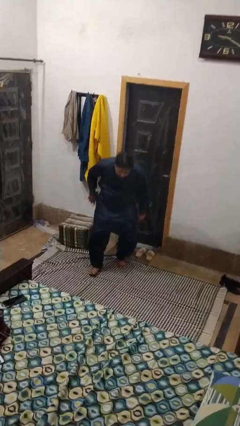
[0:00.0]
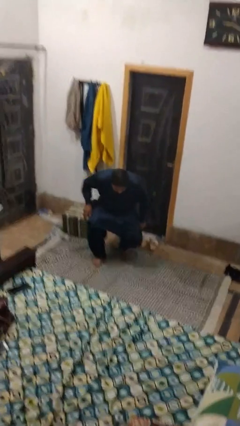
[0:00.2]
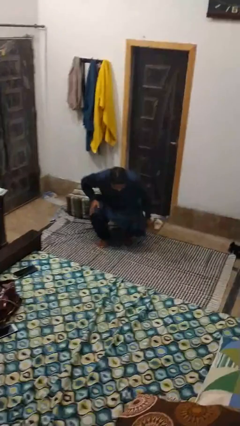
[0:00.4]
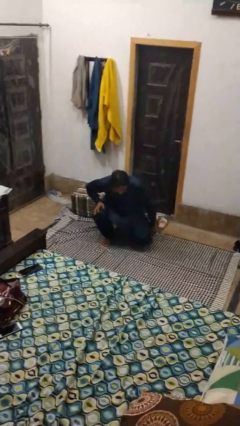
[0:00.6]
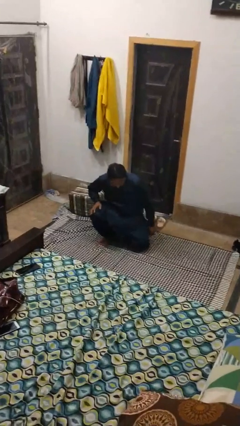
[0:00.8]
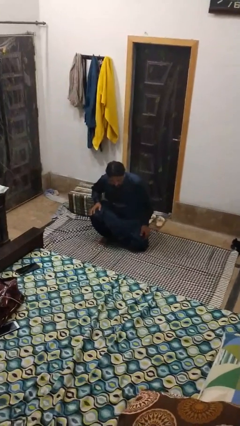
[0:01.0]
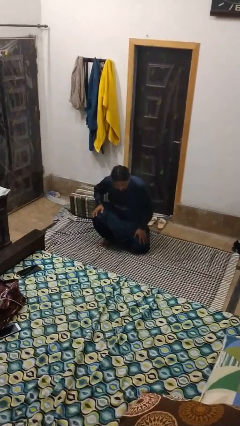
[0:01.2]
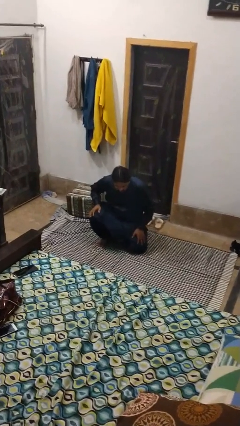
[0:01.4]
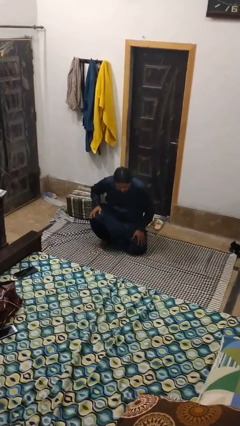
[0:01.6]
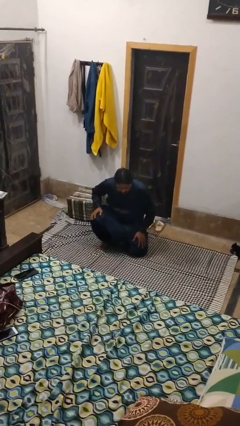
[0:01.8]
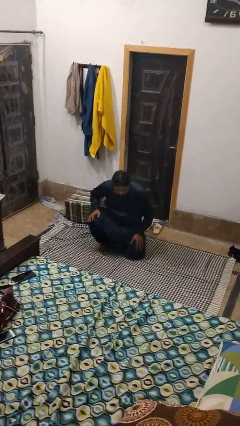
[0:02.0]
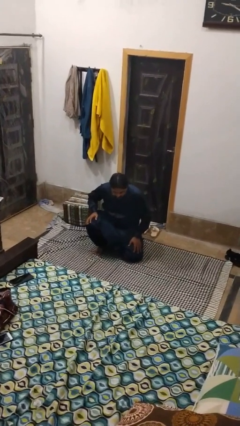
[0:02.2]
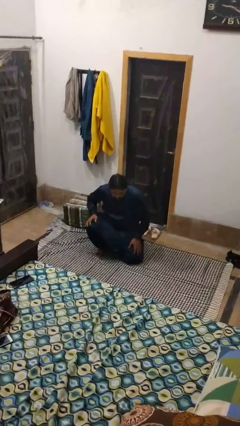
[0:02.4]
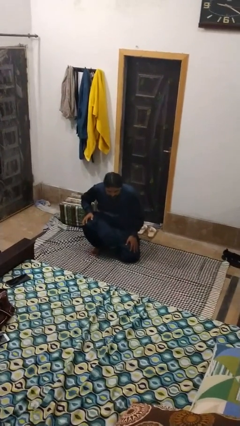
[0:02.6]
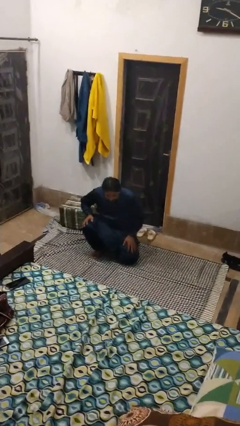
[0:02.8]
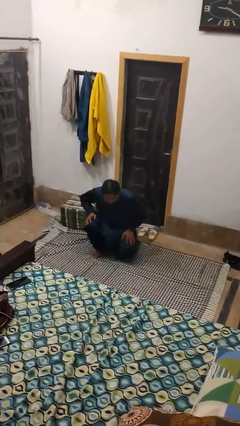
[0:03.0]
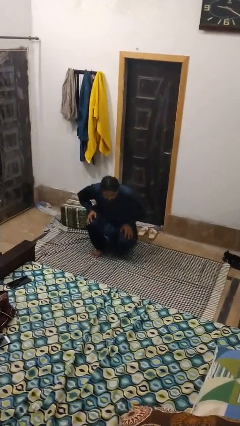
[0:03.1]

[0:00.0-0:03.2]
person kneels

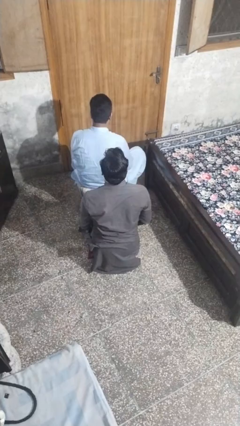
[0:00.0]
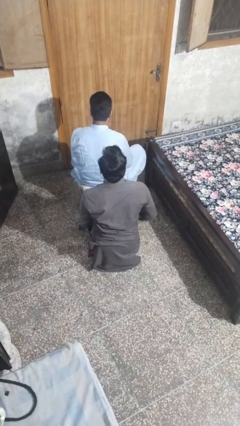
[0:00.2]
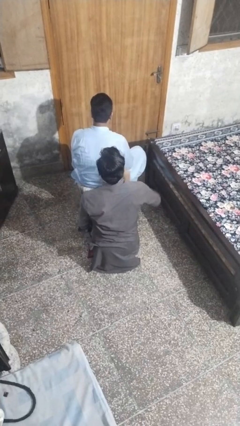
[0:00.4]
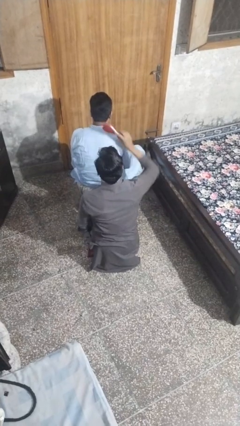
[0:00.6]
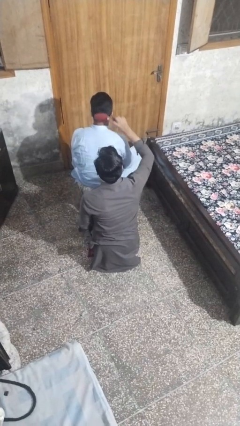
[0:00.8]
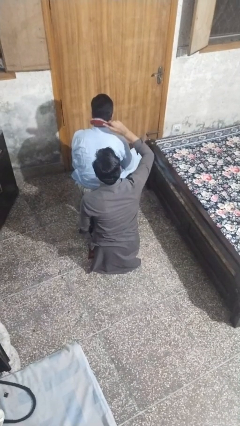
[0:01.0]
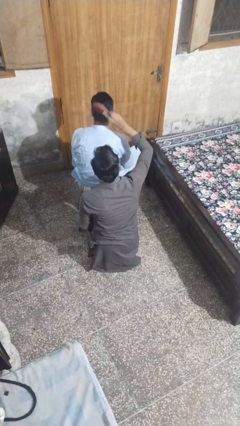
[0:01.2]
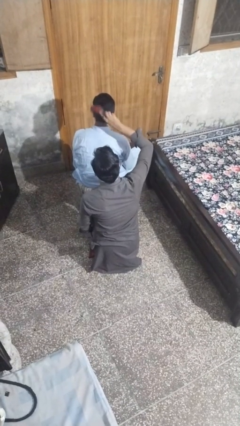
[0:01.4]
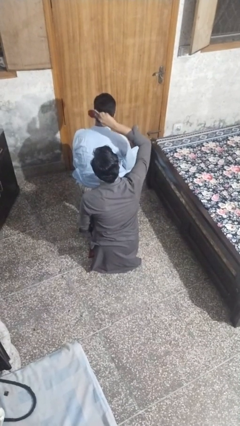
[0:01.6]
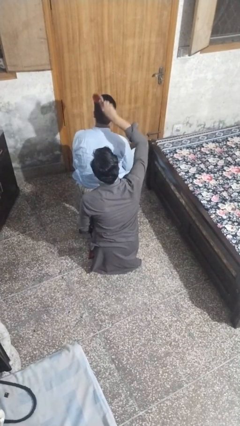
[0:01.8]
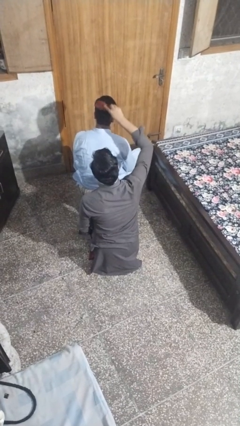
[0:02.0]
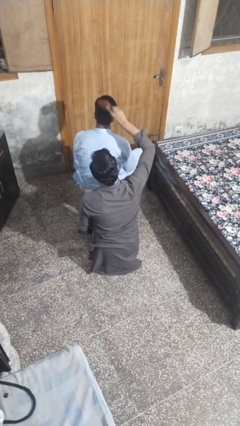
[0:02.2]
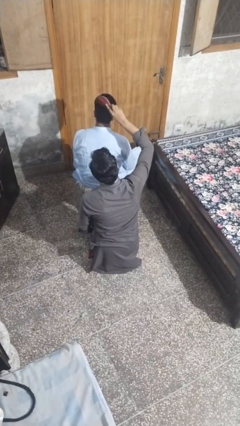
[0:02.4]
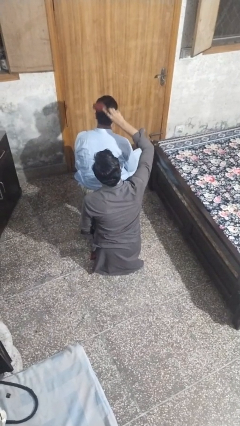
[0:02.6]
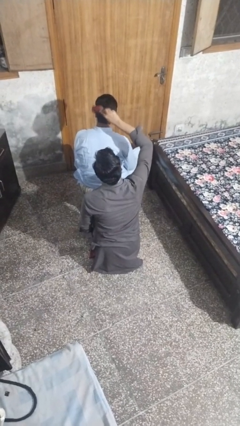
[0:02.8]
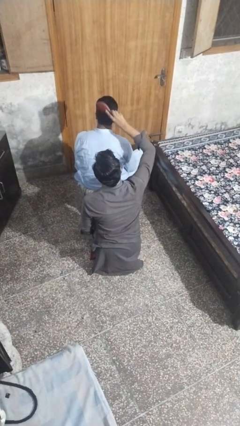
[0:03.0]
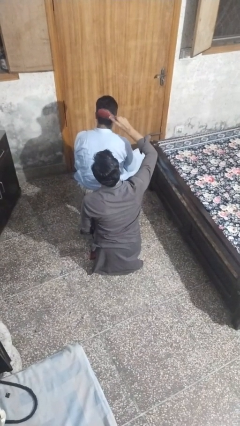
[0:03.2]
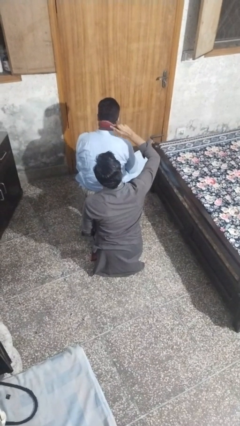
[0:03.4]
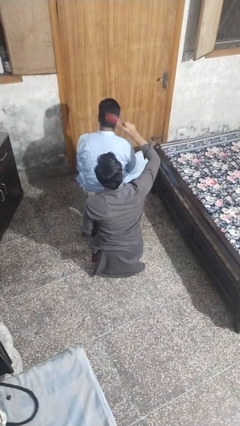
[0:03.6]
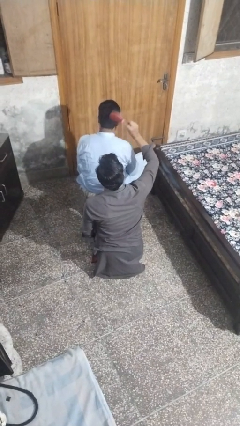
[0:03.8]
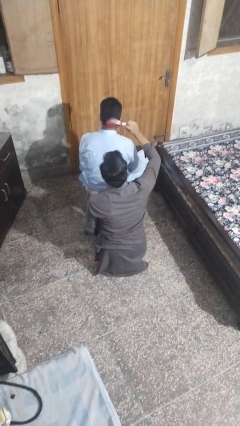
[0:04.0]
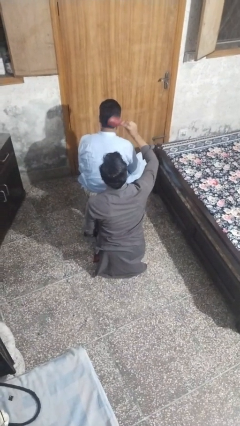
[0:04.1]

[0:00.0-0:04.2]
person brushes hair of person

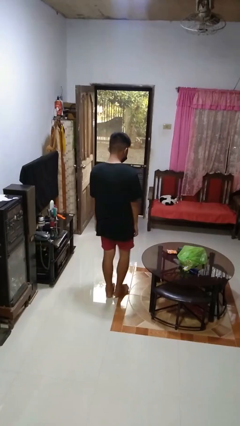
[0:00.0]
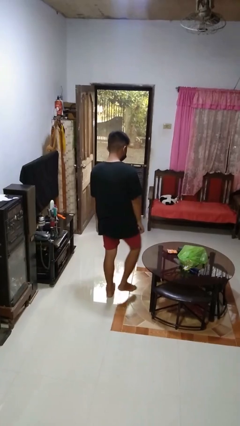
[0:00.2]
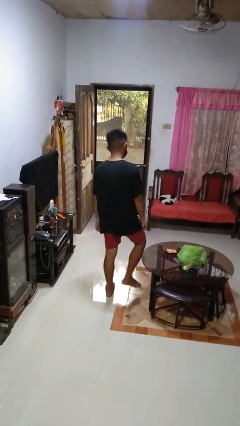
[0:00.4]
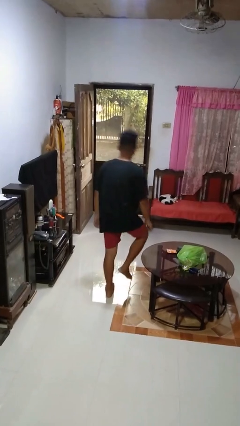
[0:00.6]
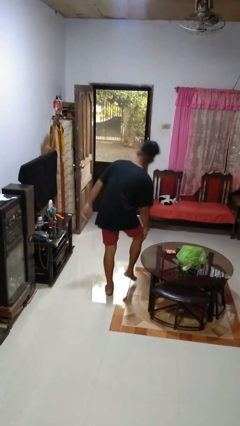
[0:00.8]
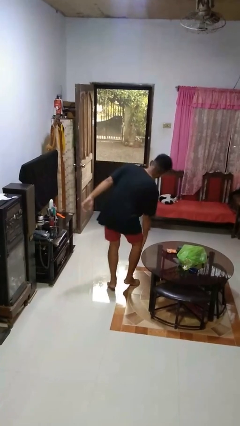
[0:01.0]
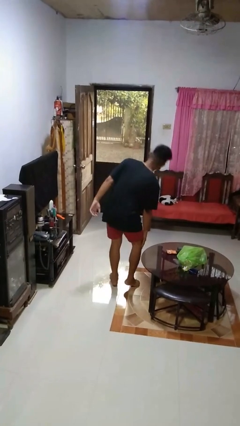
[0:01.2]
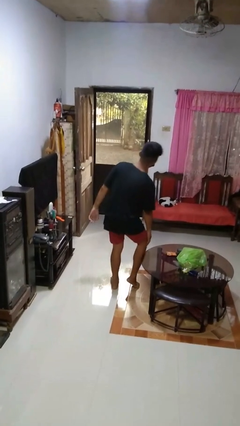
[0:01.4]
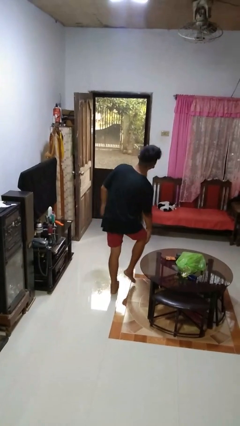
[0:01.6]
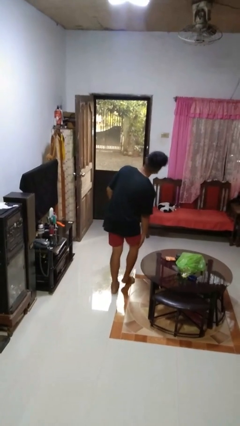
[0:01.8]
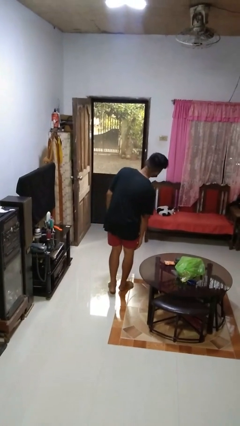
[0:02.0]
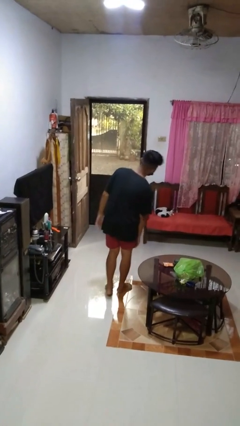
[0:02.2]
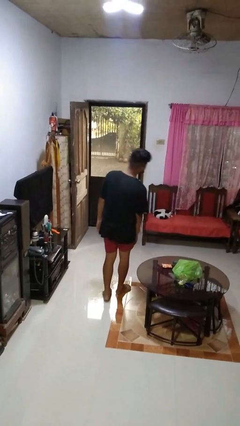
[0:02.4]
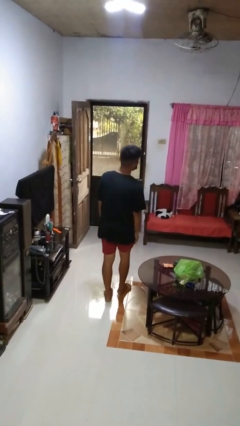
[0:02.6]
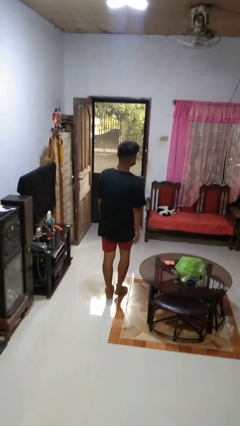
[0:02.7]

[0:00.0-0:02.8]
person bumps into table

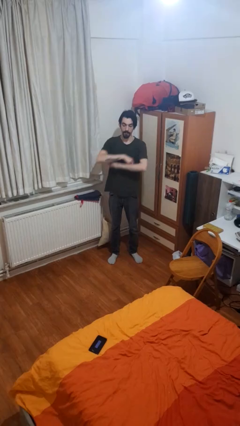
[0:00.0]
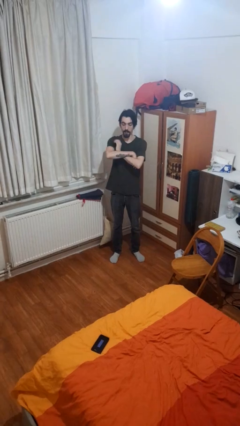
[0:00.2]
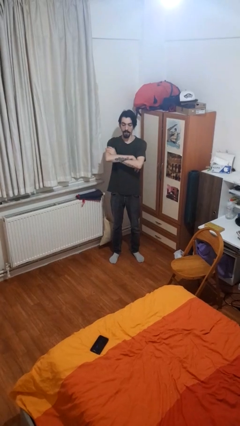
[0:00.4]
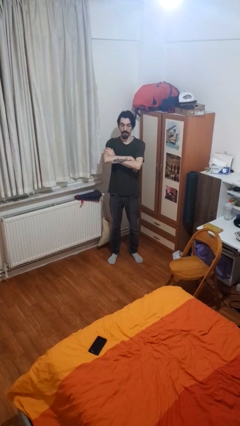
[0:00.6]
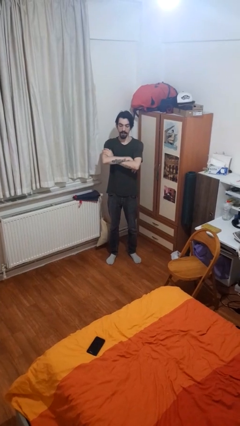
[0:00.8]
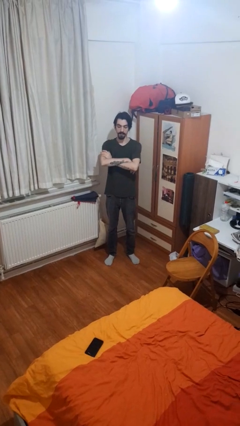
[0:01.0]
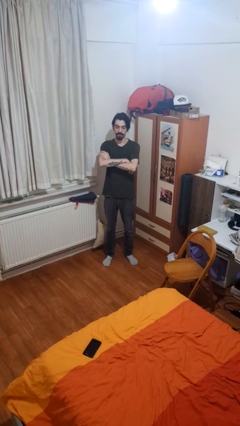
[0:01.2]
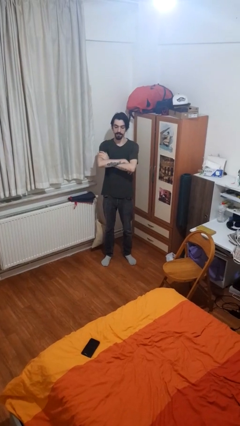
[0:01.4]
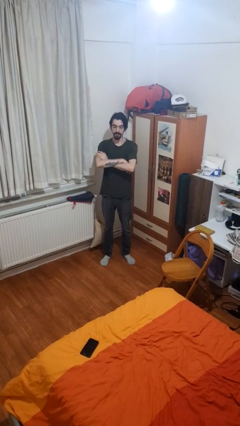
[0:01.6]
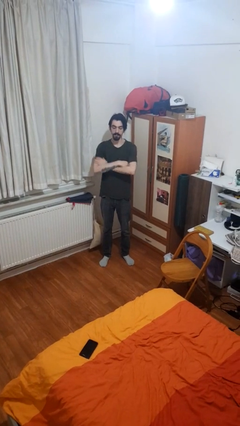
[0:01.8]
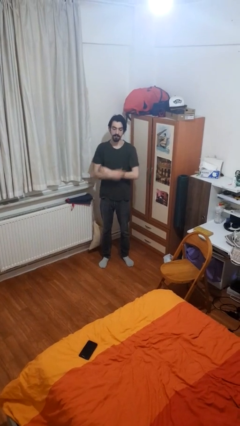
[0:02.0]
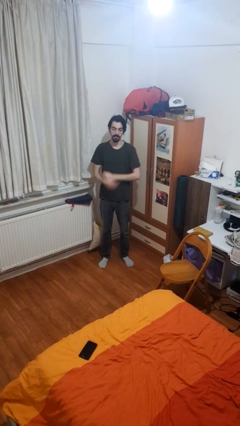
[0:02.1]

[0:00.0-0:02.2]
person crosses arms

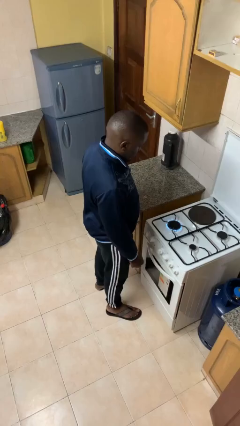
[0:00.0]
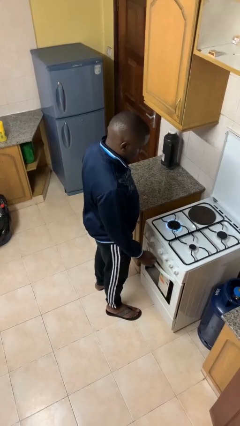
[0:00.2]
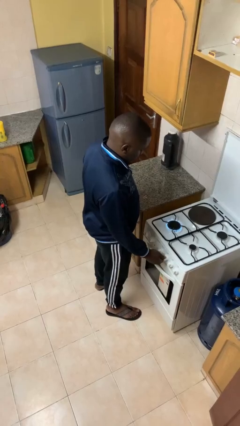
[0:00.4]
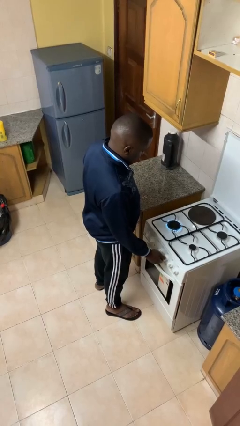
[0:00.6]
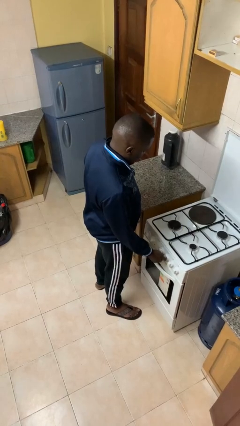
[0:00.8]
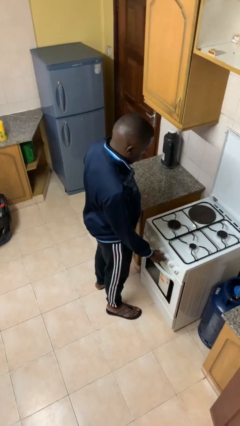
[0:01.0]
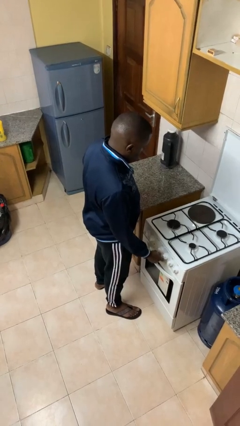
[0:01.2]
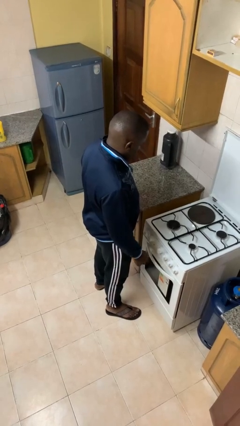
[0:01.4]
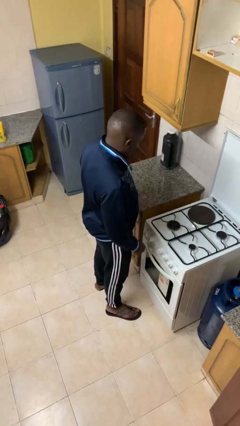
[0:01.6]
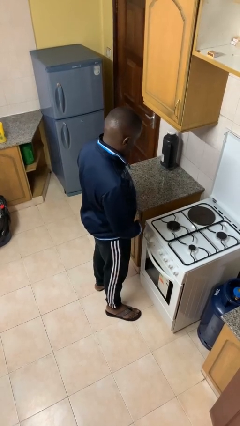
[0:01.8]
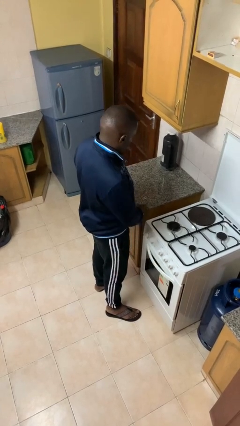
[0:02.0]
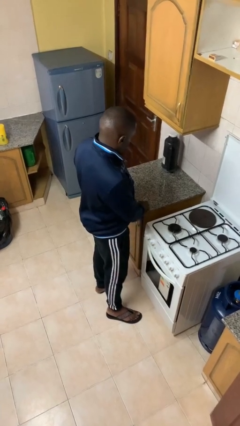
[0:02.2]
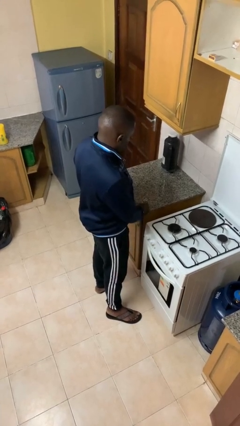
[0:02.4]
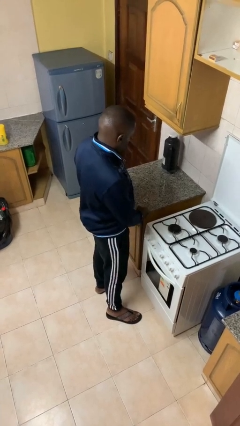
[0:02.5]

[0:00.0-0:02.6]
person turns off stovetop

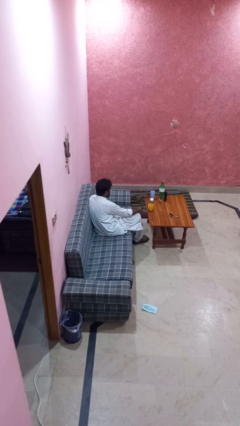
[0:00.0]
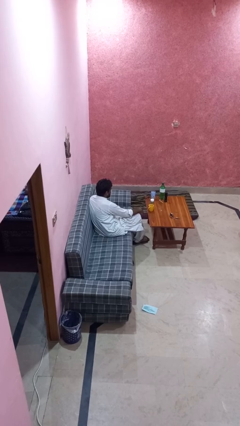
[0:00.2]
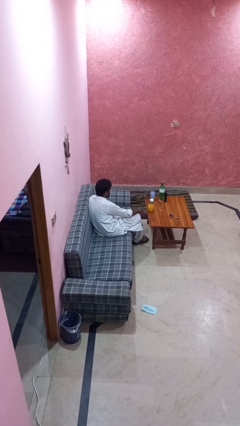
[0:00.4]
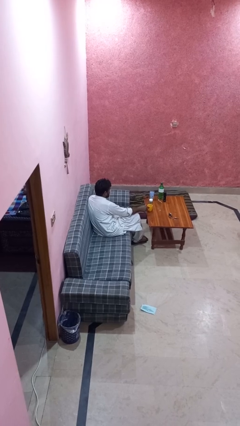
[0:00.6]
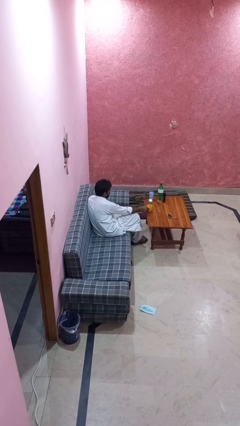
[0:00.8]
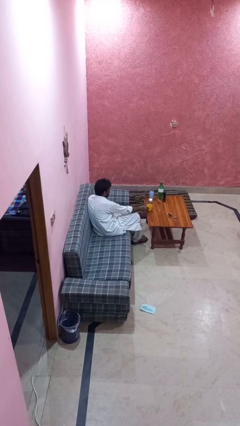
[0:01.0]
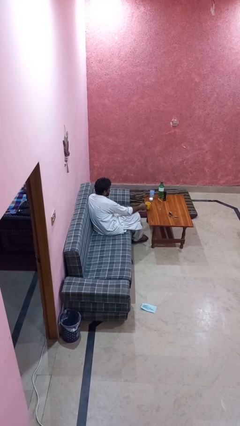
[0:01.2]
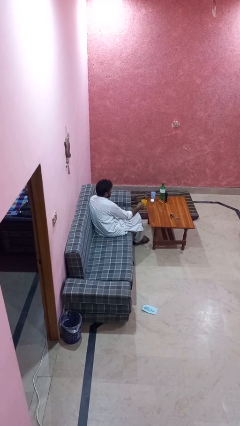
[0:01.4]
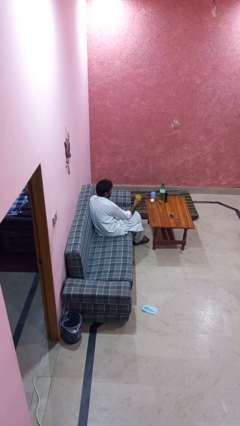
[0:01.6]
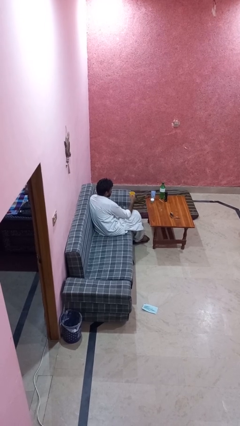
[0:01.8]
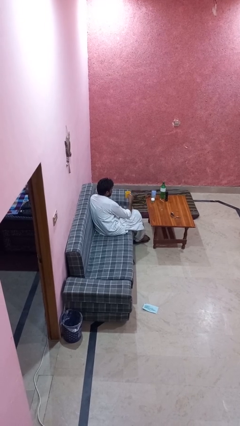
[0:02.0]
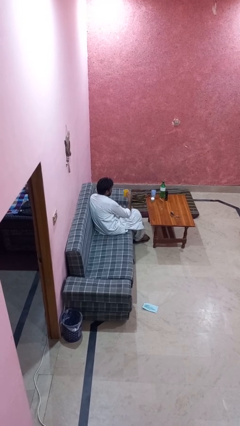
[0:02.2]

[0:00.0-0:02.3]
person picks up object from table
